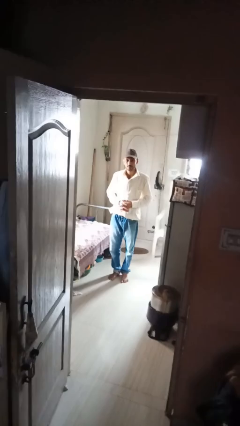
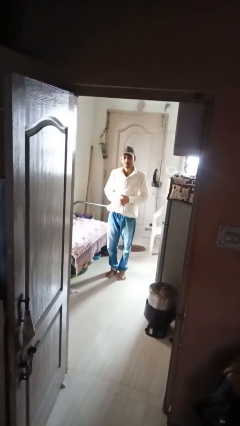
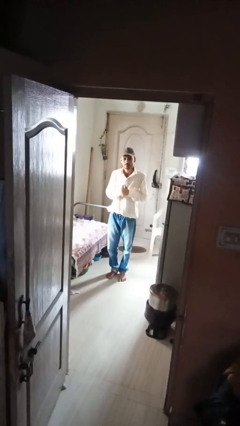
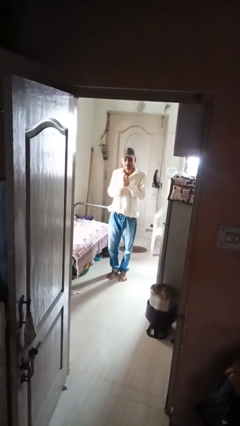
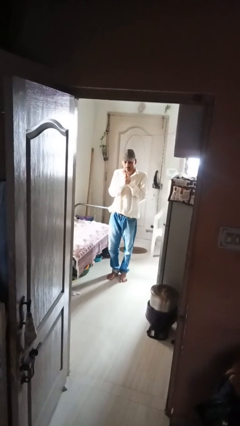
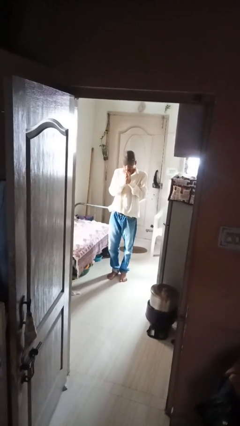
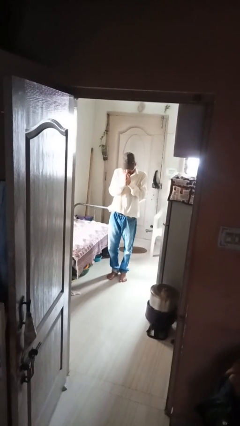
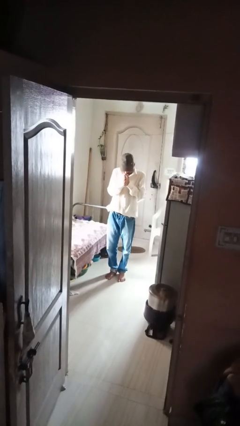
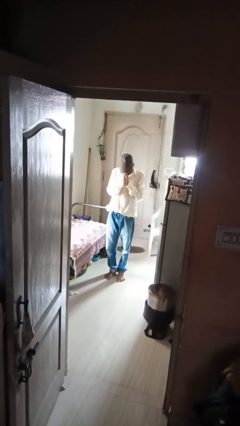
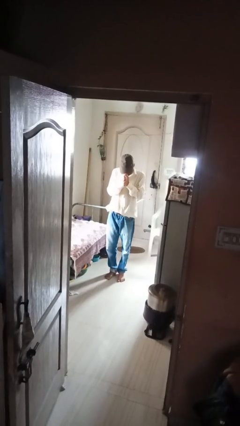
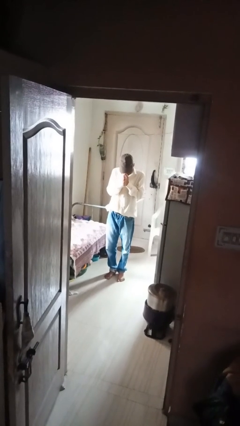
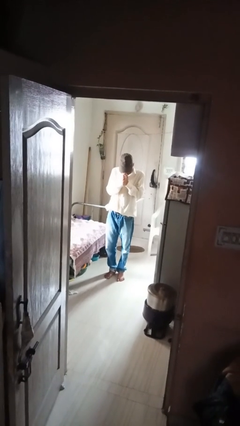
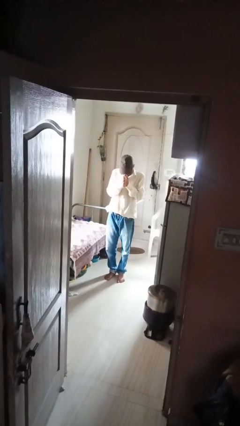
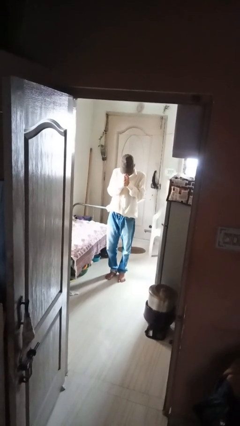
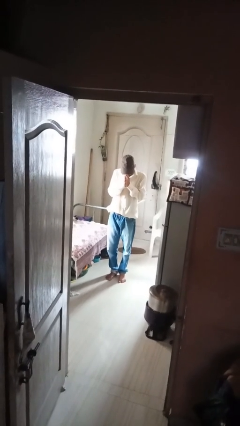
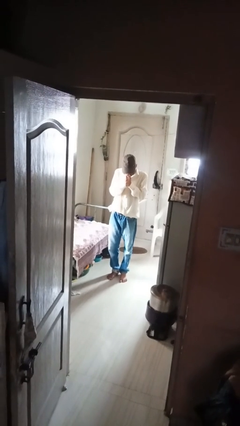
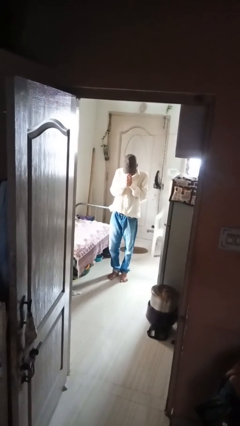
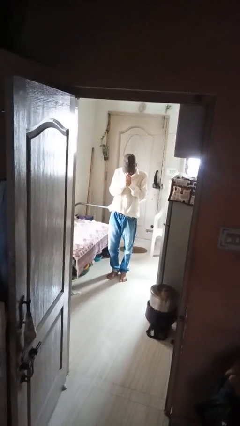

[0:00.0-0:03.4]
person prays

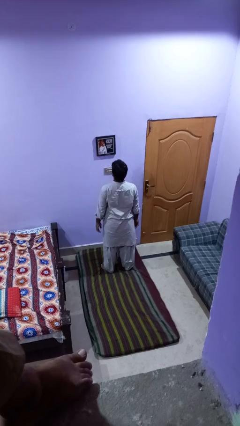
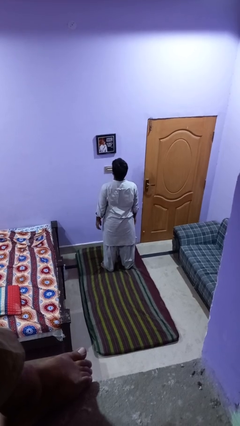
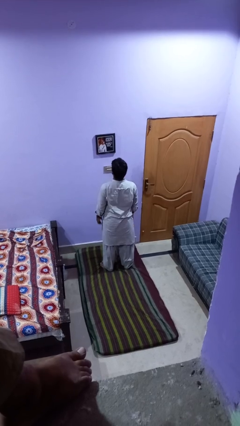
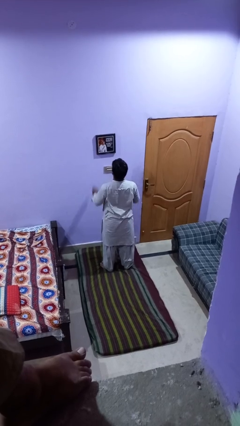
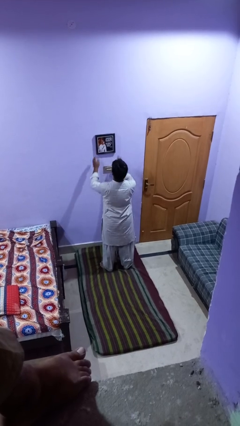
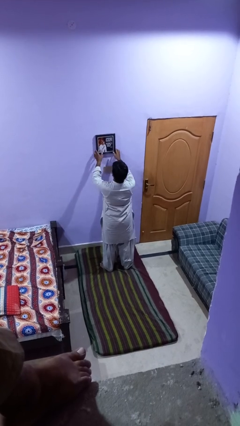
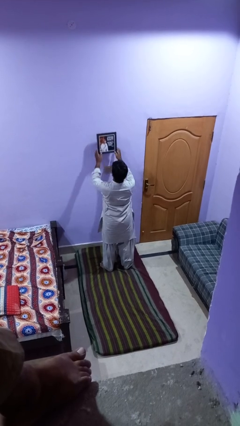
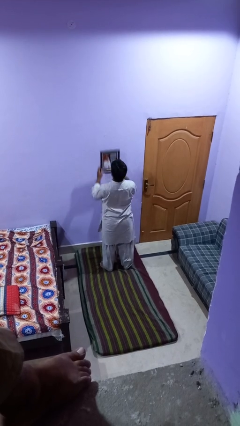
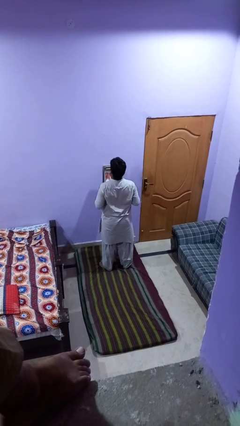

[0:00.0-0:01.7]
person takes down picture frame

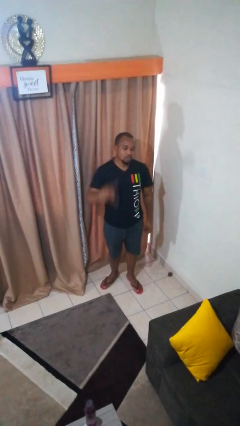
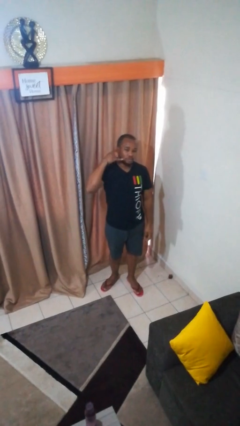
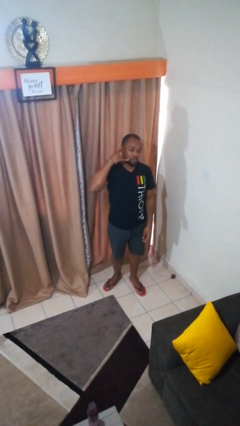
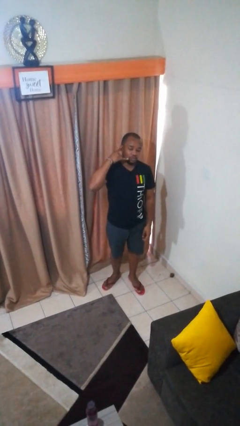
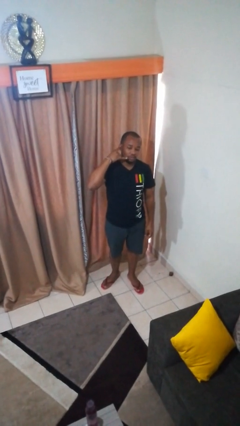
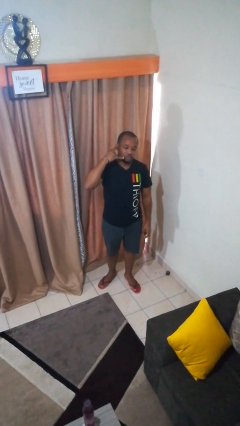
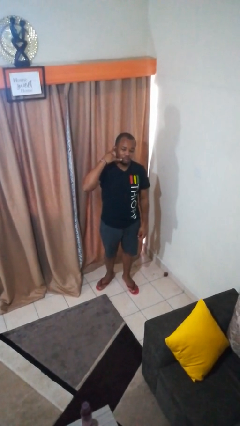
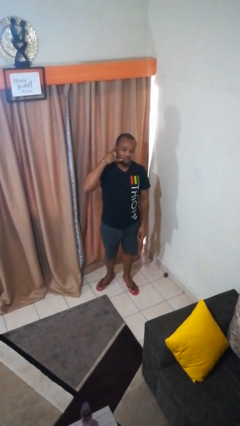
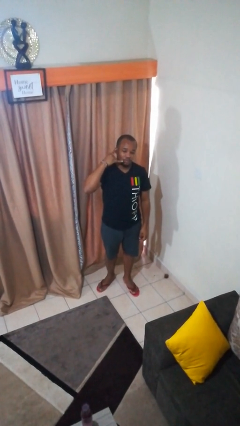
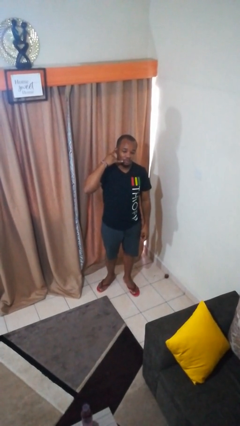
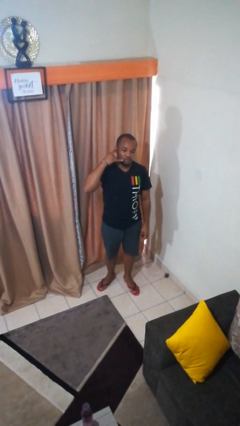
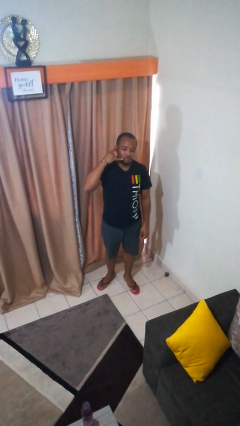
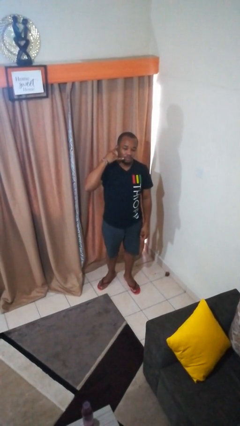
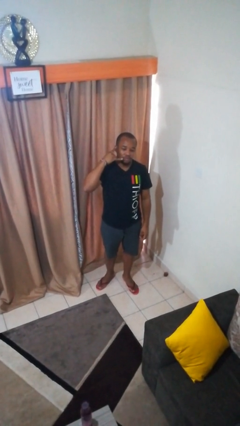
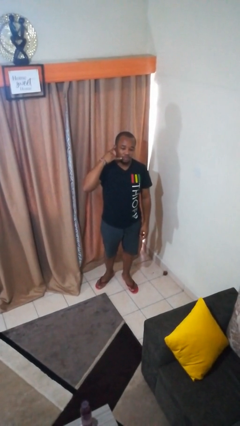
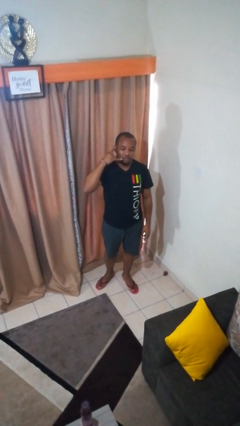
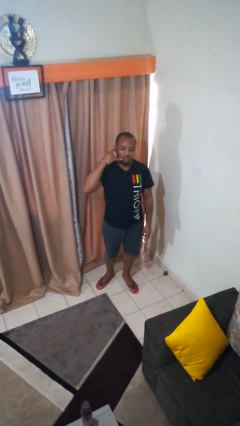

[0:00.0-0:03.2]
person gestures call me

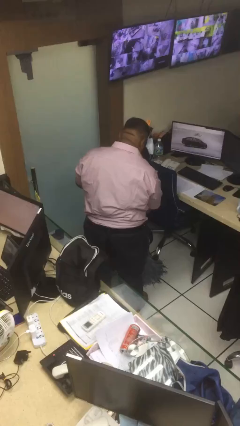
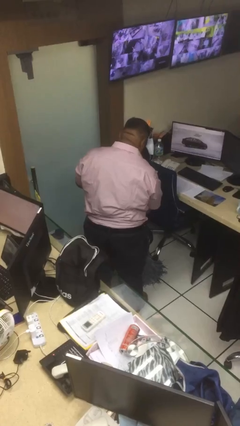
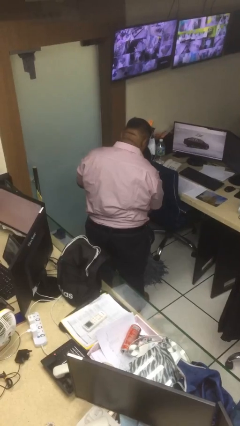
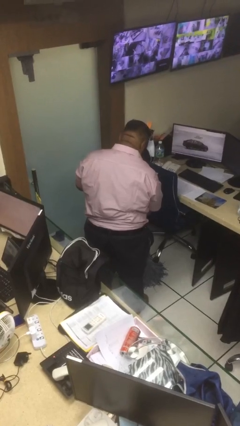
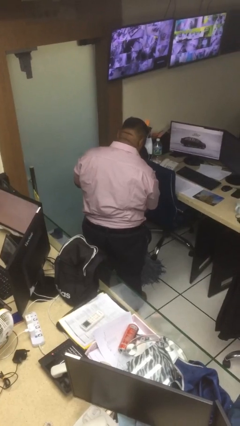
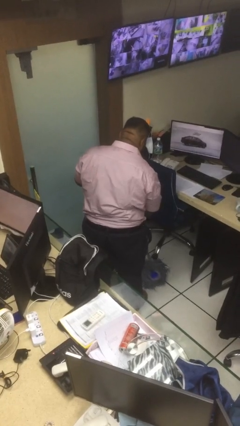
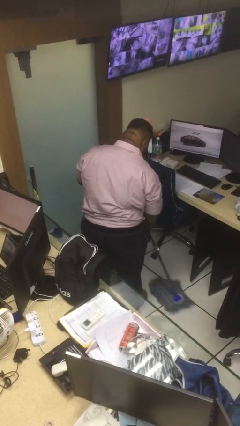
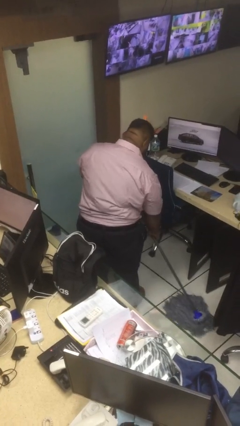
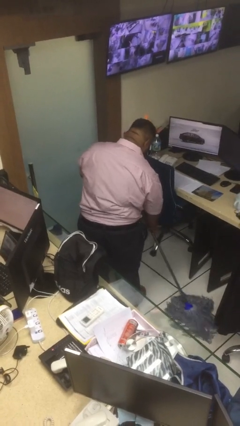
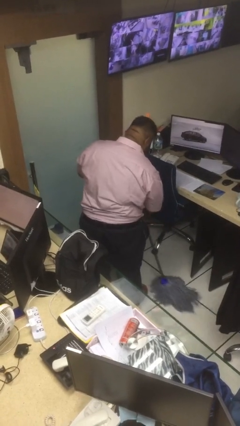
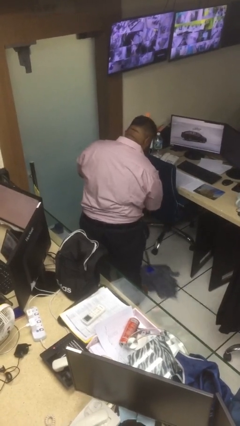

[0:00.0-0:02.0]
person mops

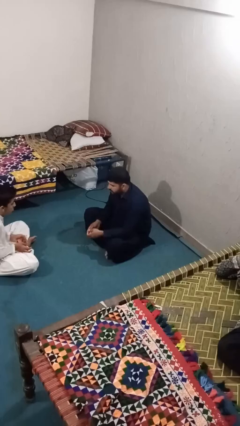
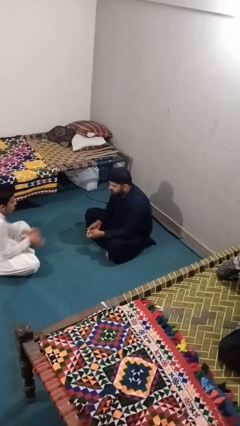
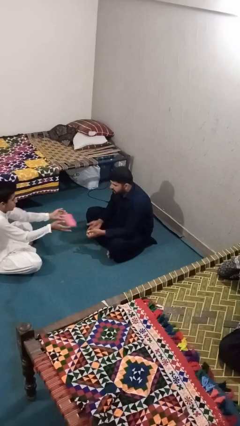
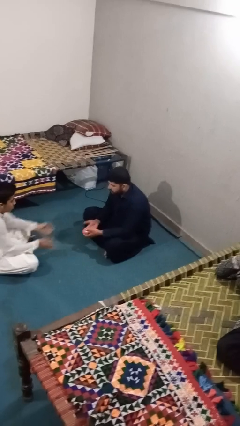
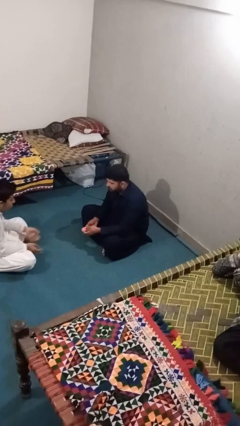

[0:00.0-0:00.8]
person catches object from person

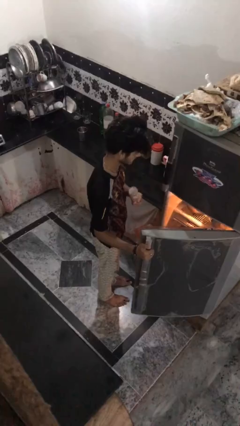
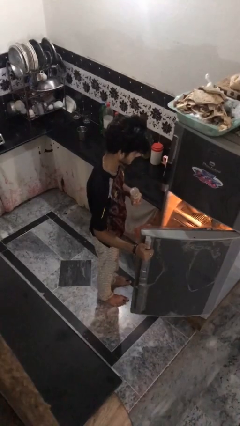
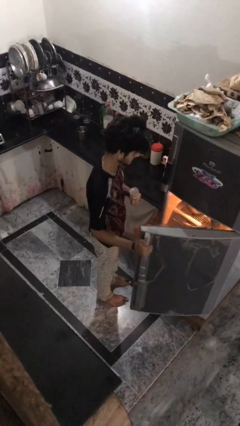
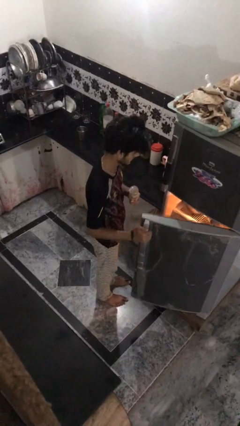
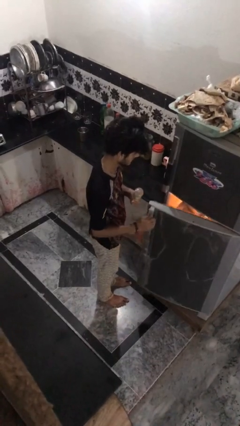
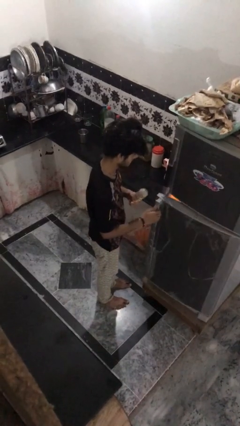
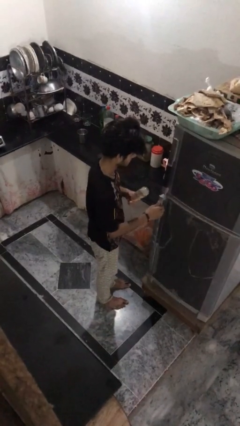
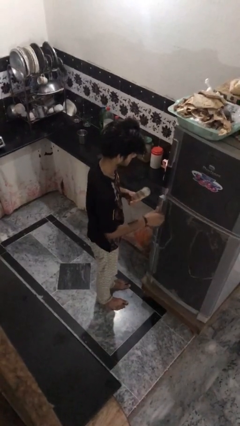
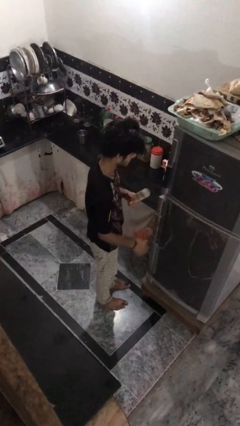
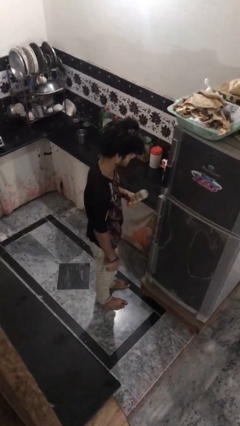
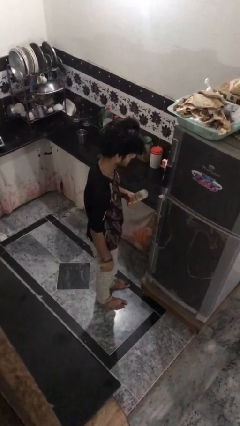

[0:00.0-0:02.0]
person closes refrigerator

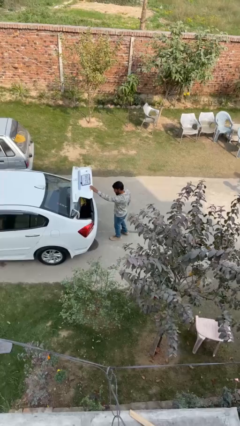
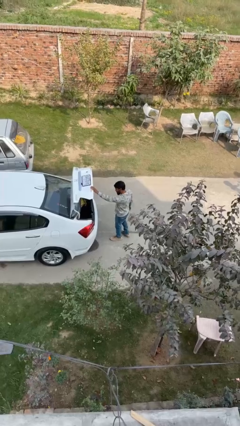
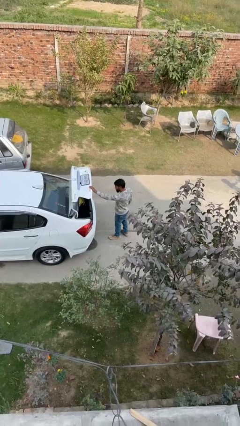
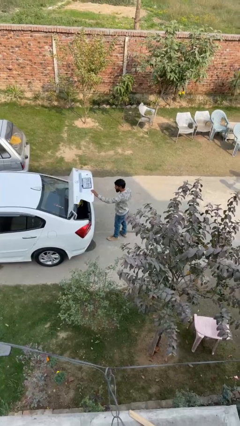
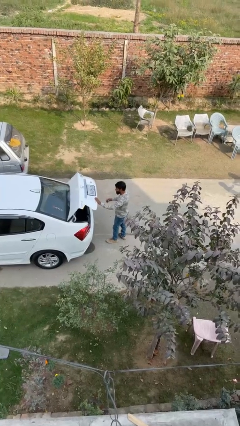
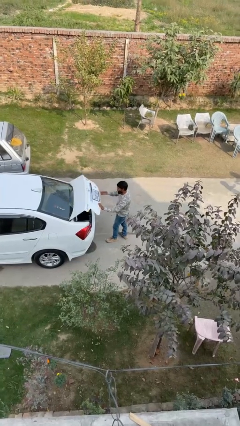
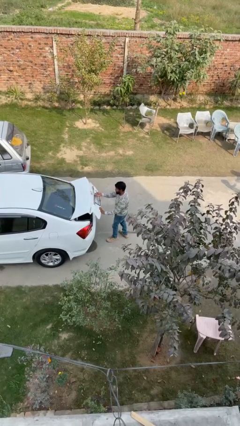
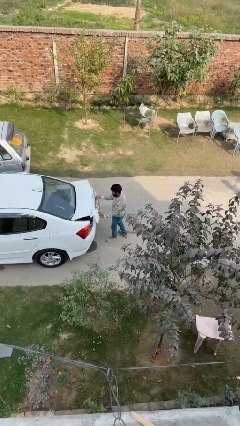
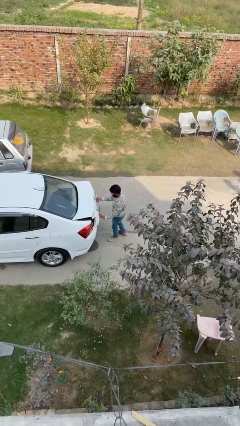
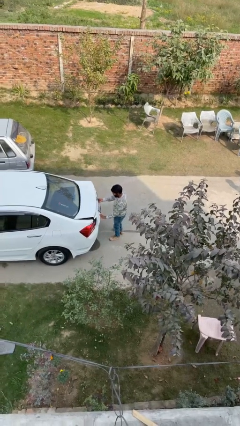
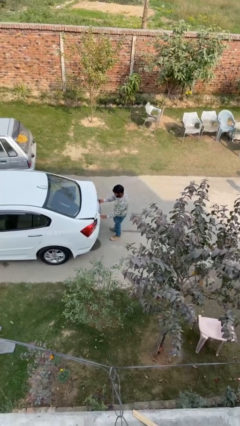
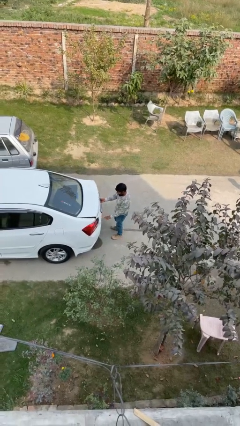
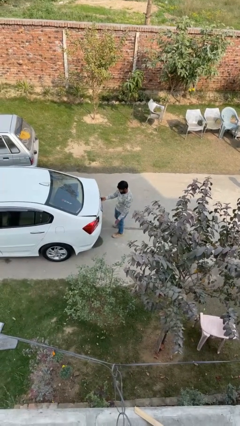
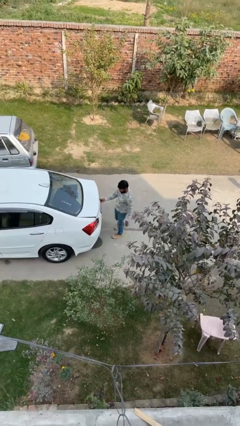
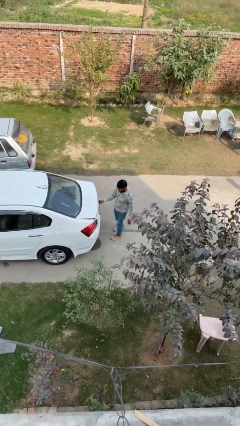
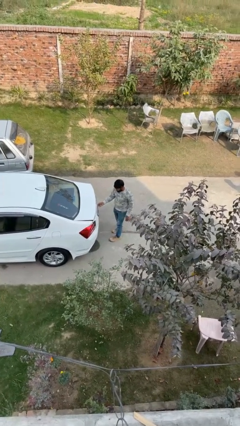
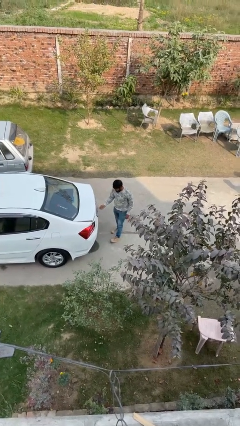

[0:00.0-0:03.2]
person closes car trunk

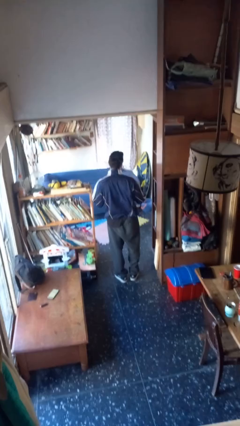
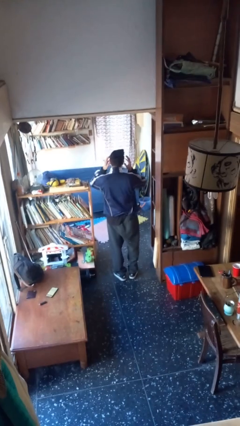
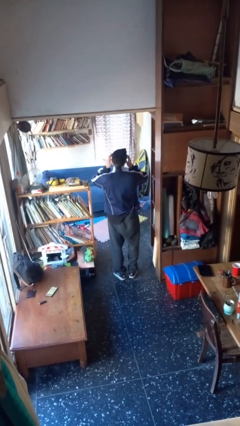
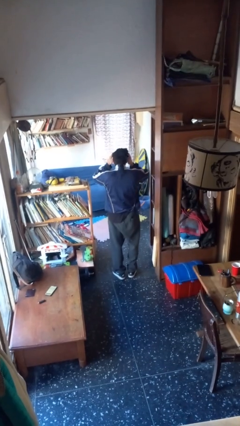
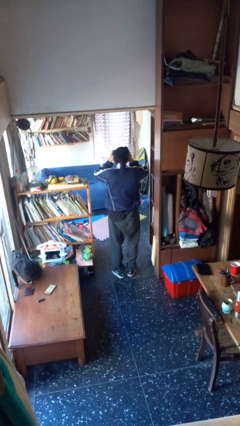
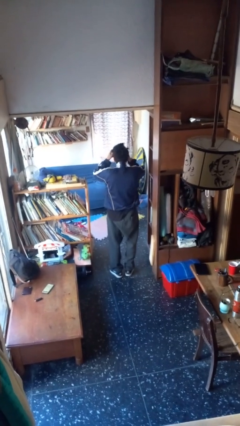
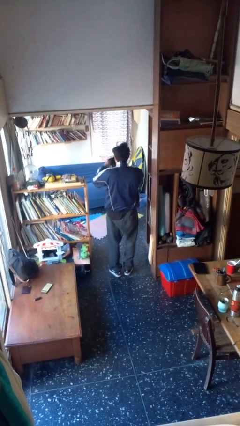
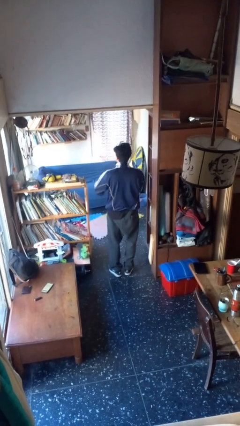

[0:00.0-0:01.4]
person takes off facemask
